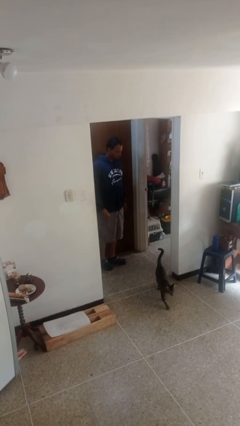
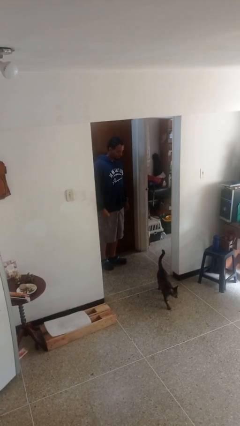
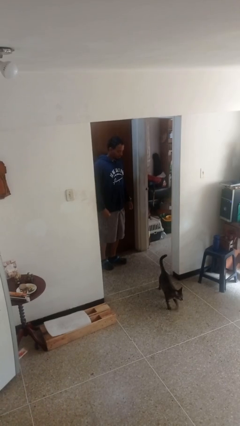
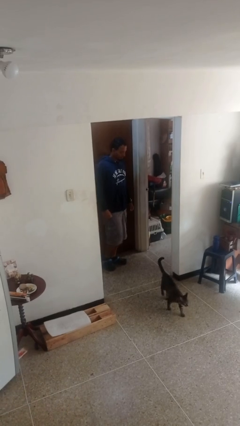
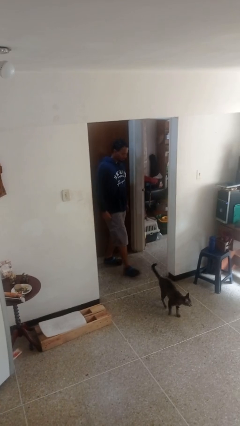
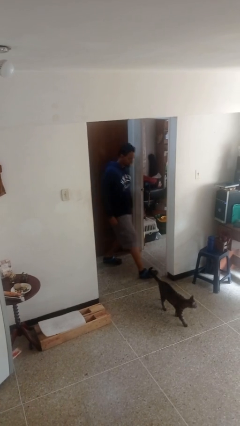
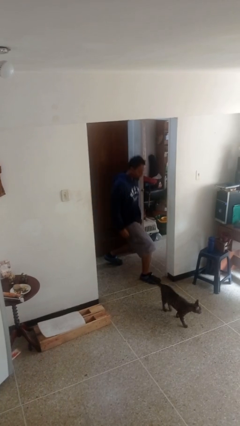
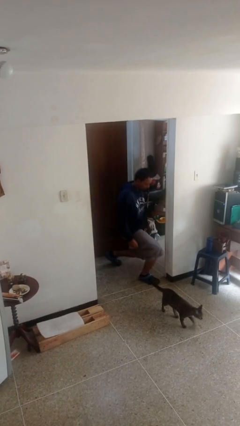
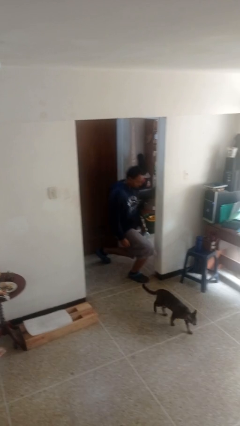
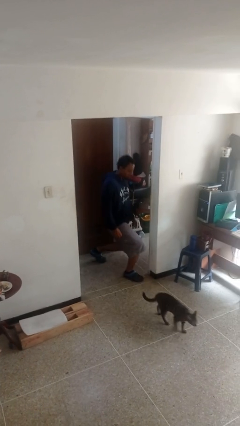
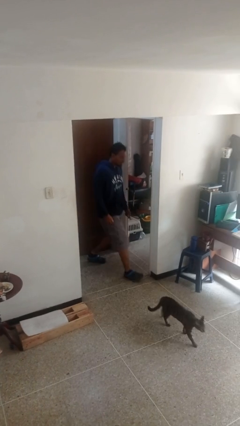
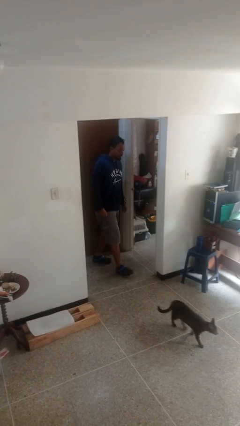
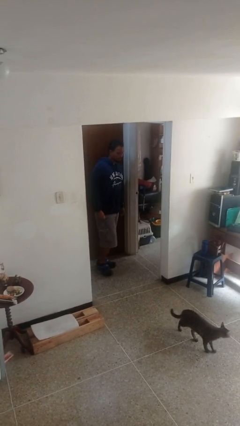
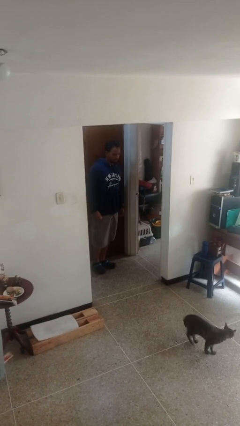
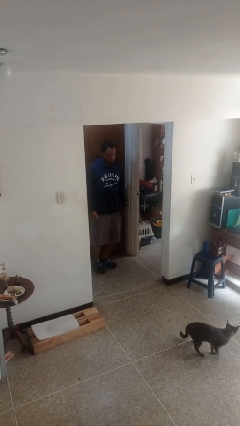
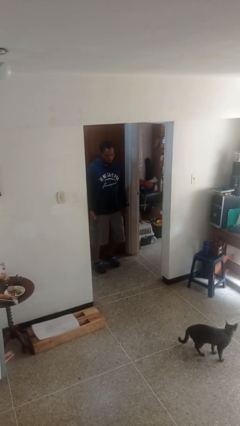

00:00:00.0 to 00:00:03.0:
person exercises with lunges

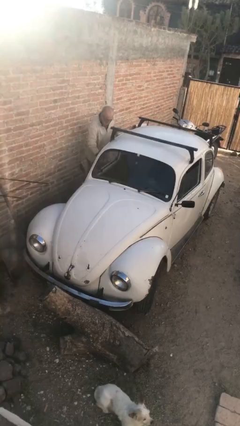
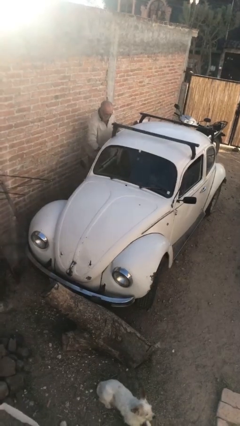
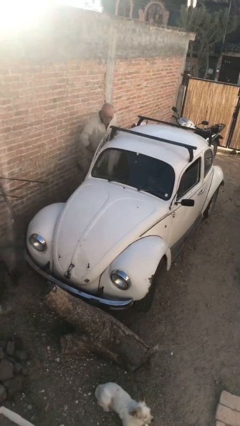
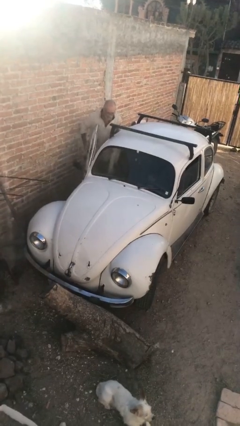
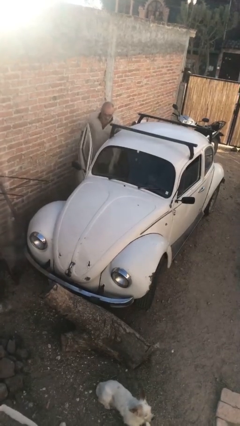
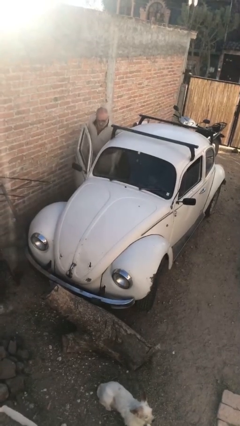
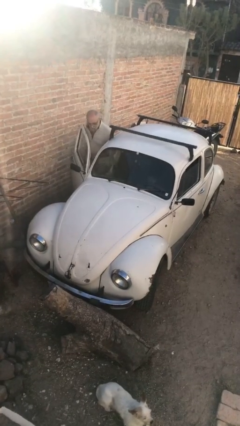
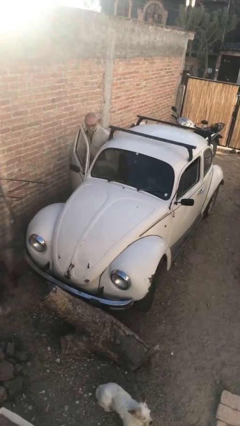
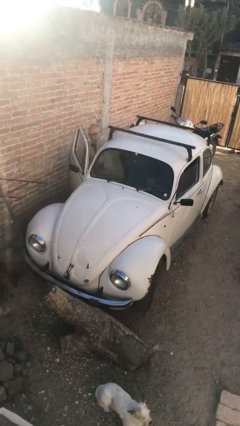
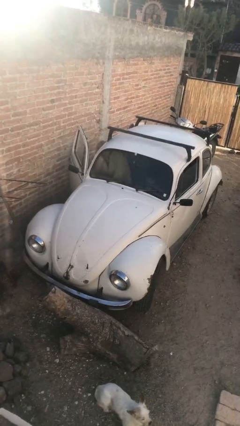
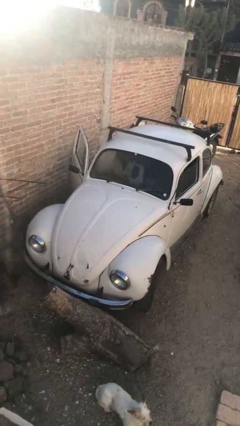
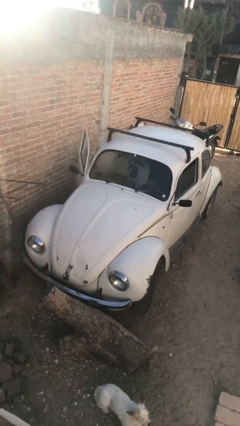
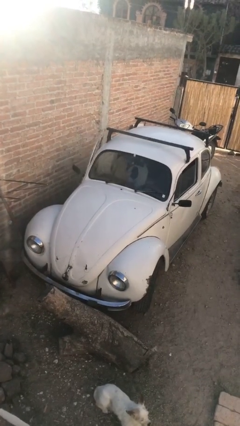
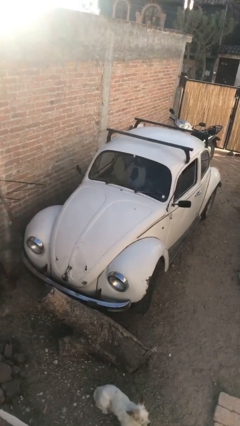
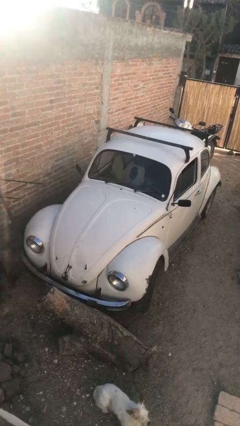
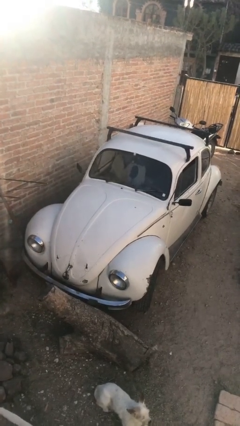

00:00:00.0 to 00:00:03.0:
car picks up person

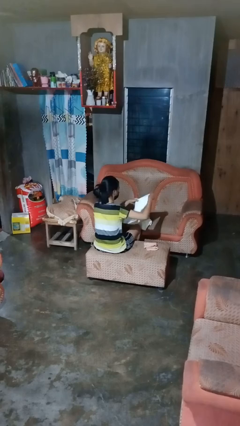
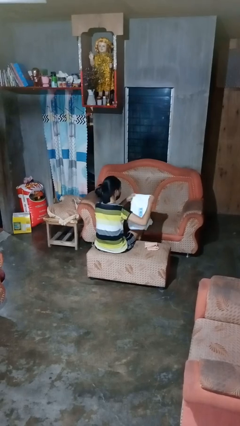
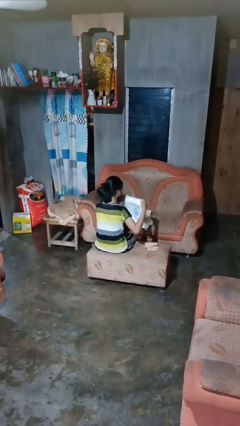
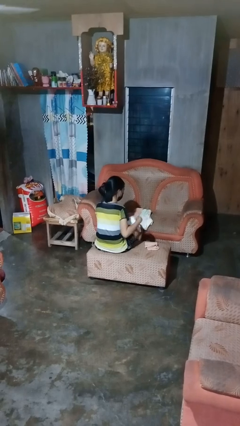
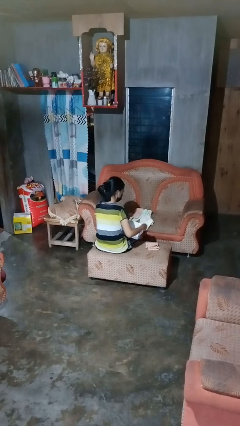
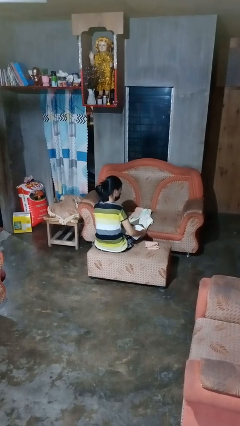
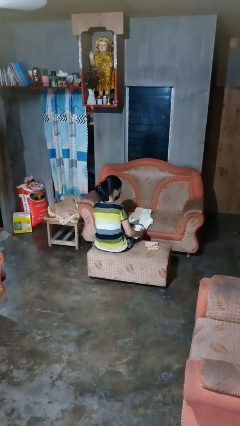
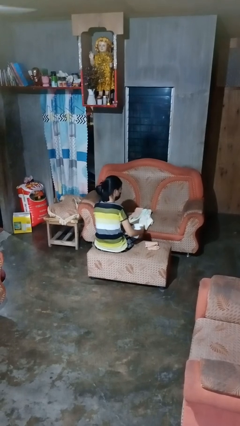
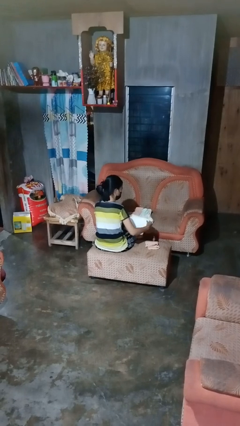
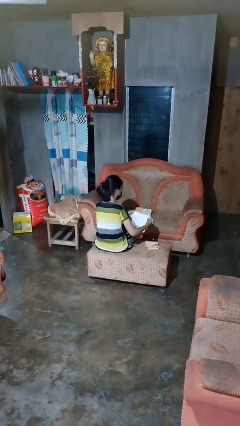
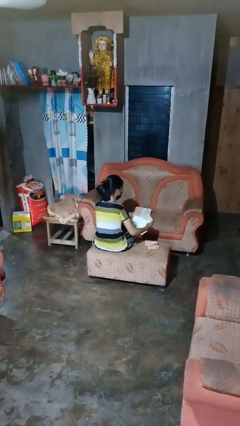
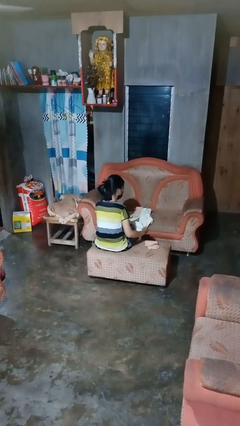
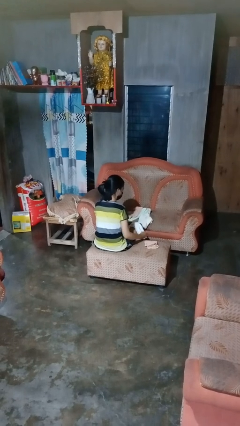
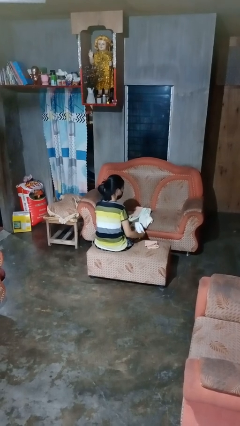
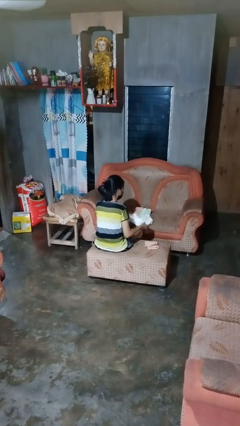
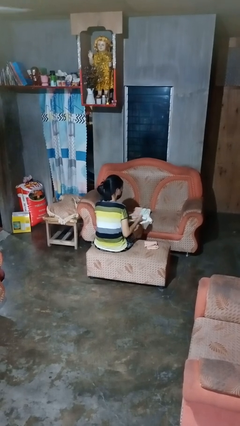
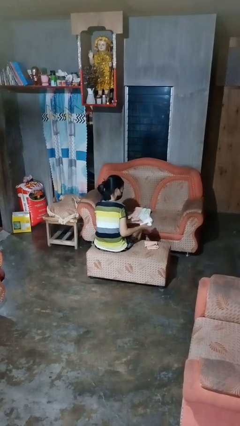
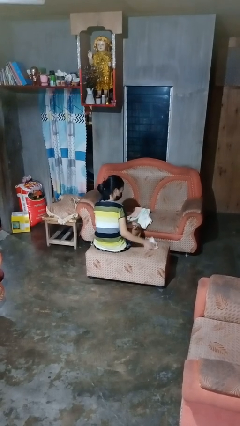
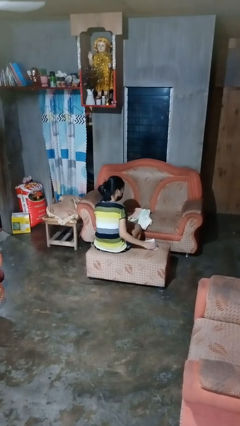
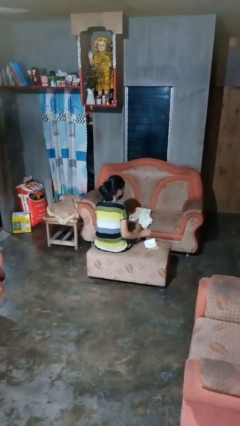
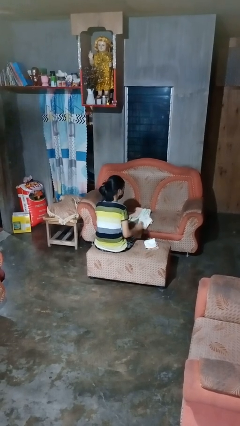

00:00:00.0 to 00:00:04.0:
person folds towel

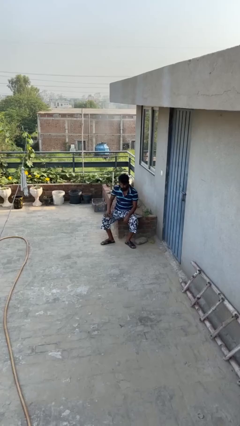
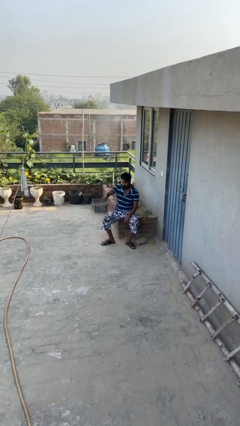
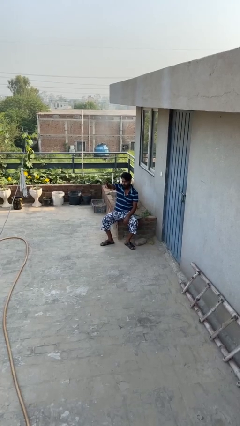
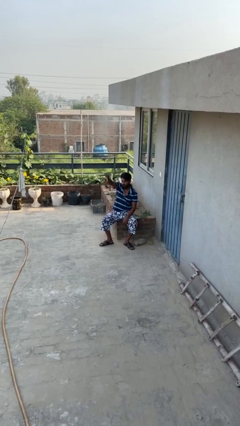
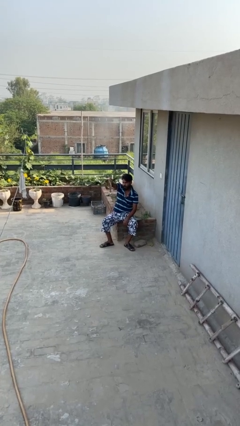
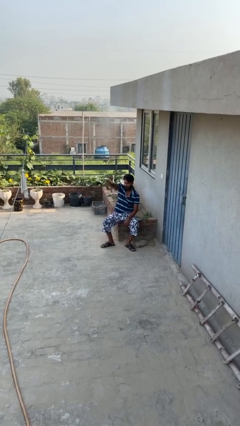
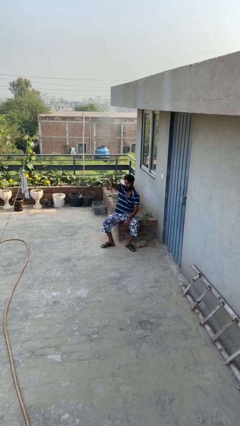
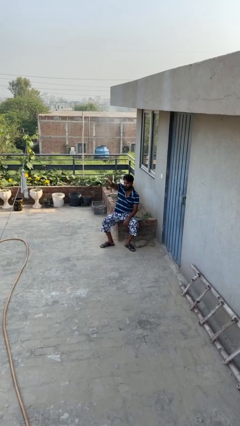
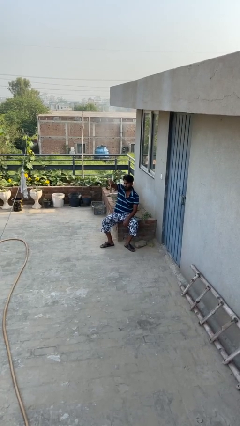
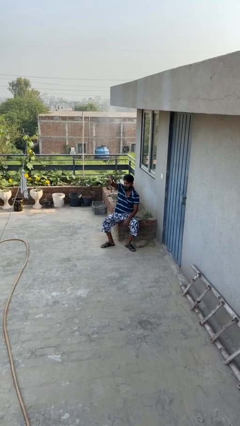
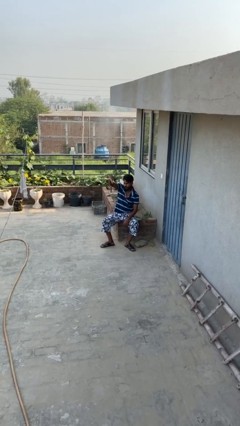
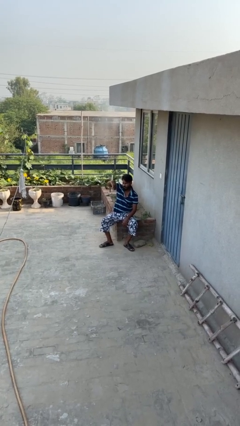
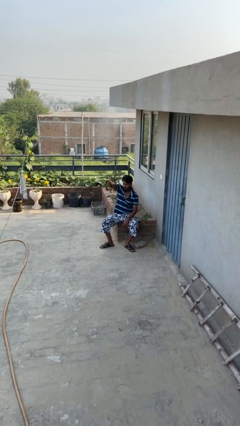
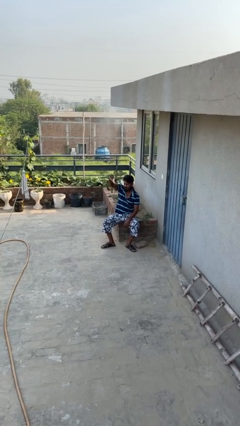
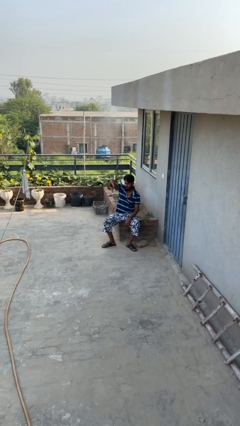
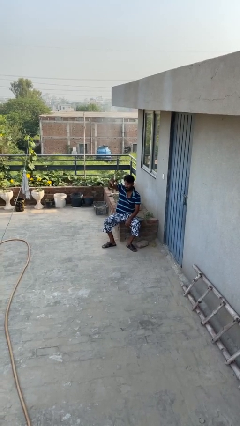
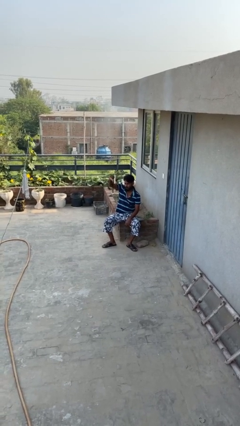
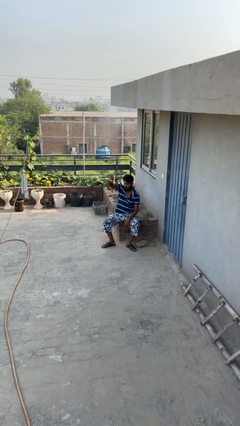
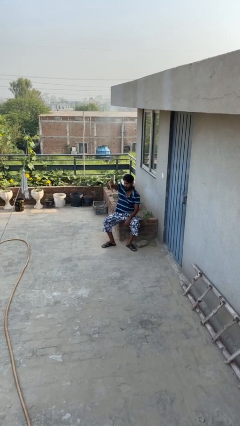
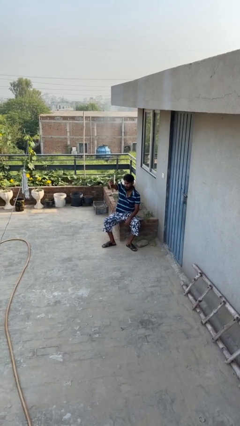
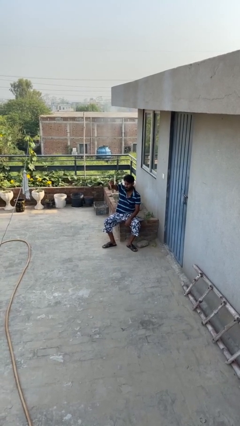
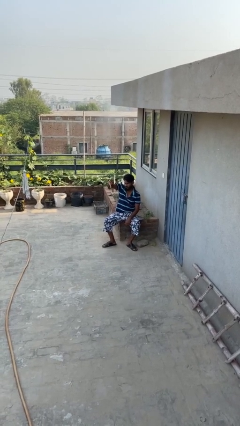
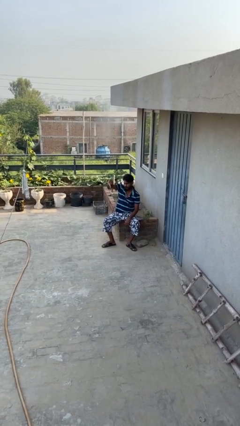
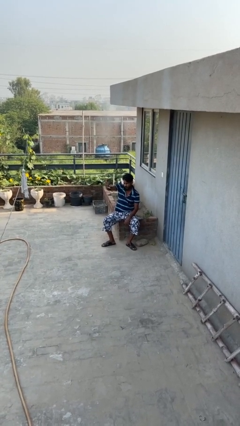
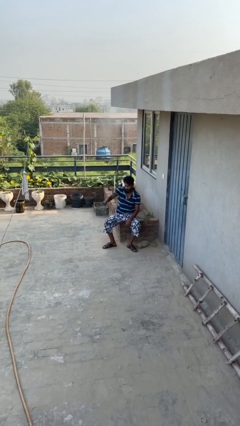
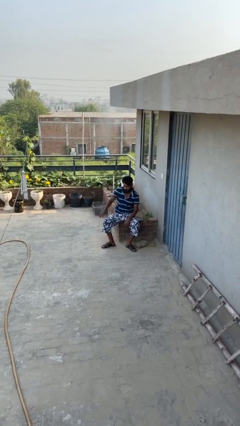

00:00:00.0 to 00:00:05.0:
person gestures thumbs down

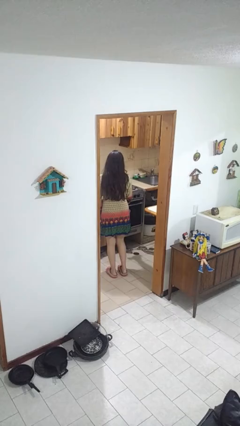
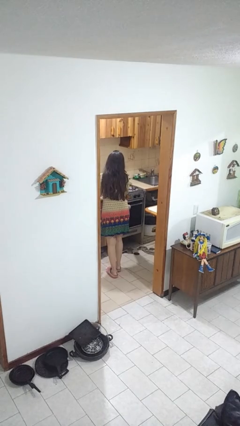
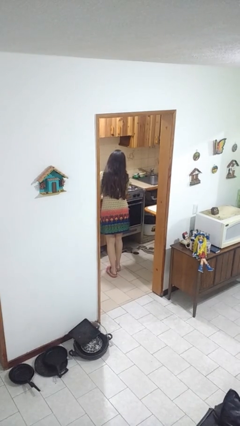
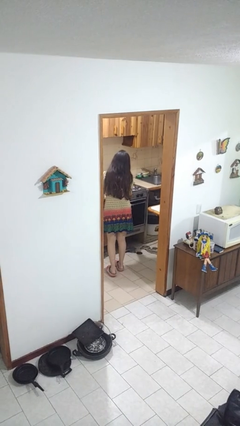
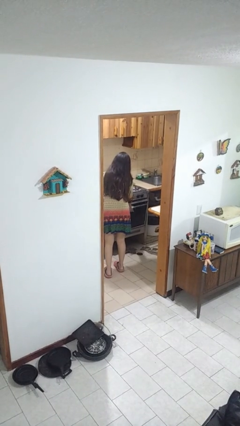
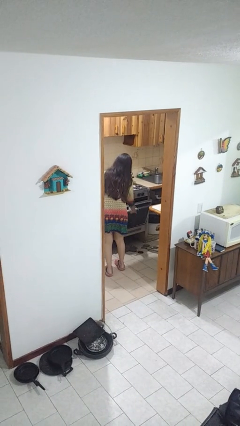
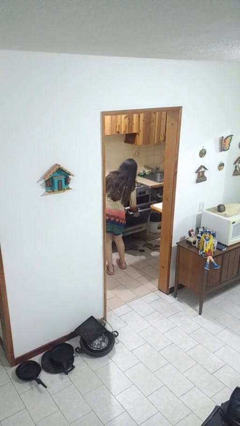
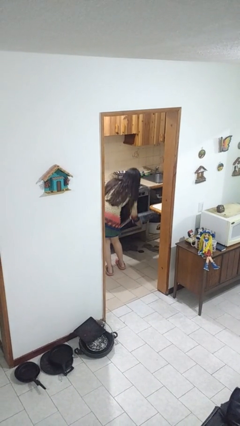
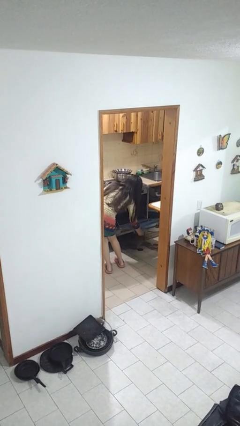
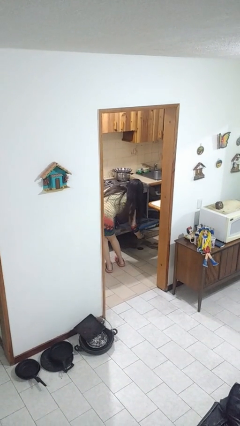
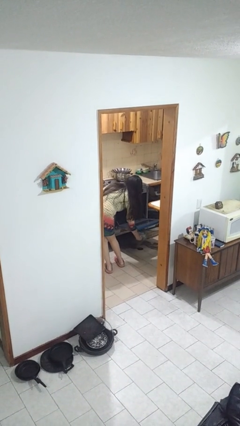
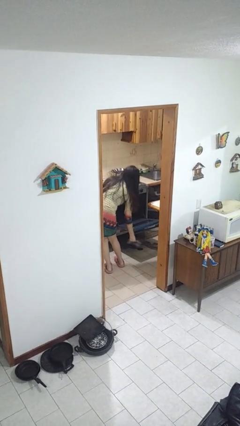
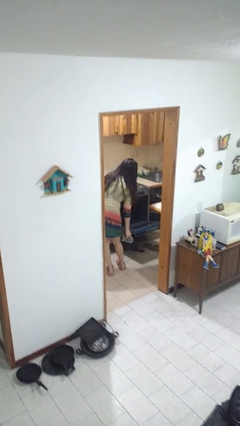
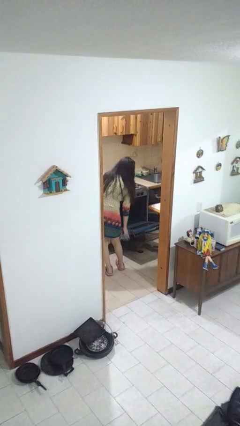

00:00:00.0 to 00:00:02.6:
person opens oven door
